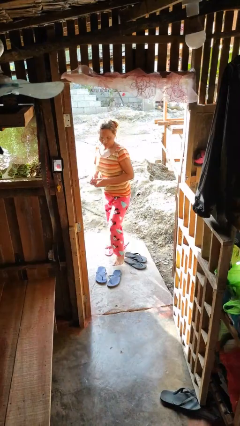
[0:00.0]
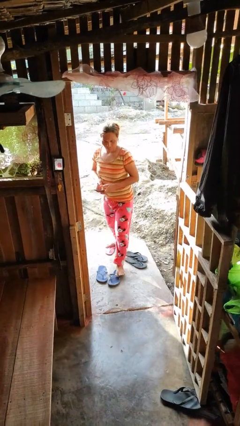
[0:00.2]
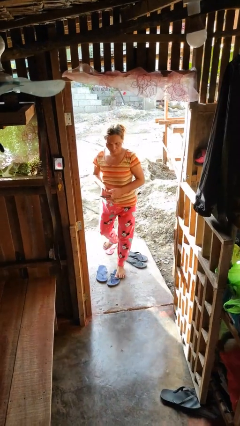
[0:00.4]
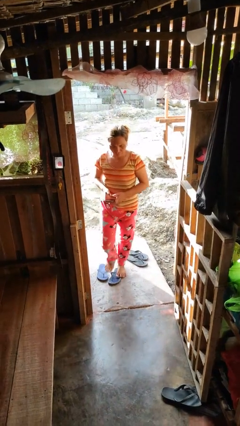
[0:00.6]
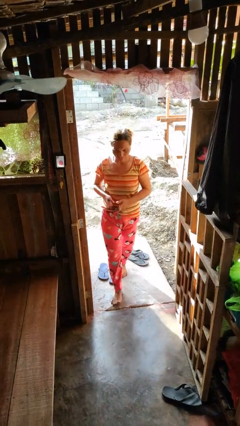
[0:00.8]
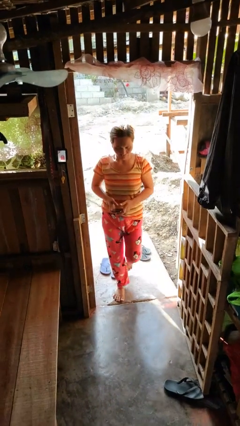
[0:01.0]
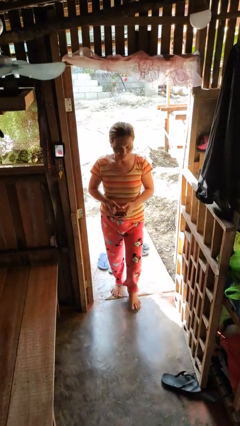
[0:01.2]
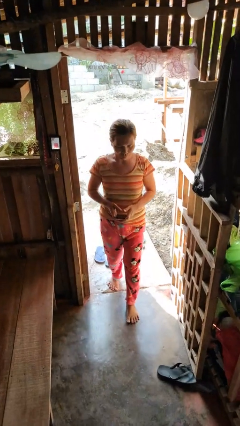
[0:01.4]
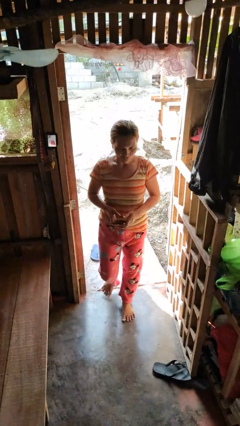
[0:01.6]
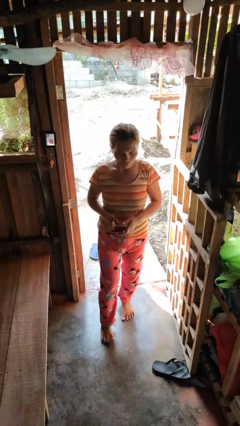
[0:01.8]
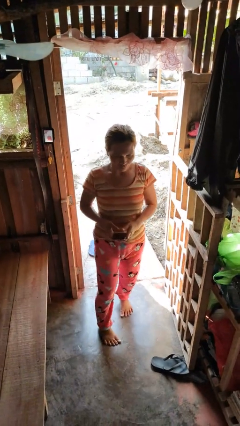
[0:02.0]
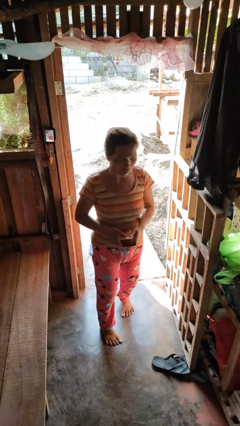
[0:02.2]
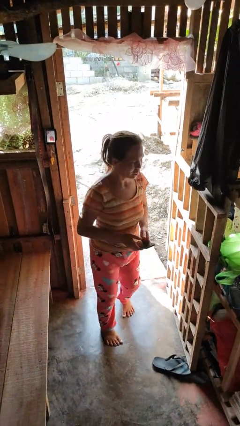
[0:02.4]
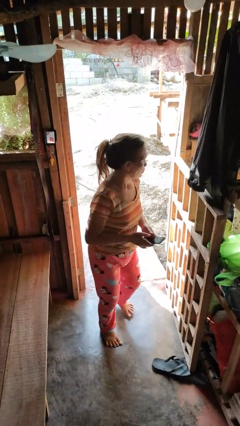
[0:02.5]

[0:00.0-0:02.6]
person enters scene through structure

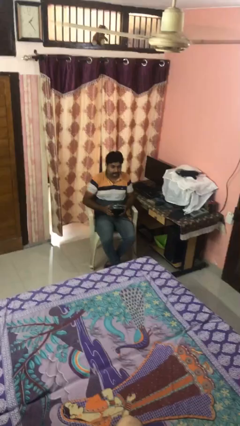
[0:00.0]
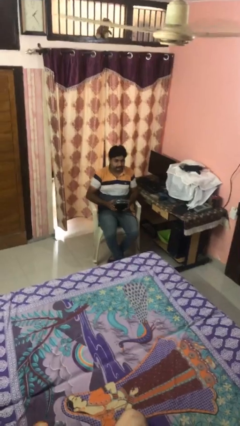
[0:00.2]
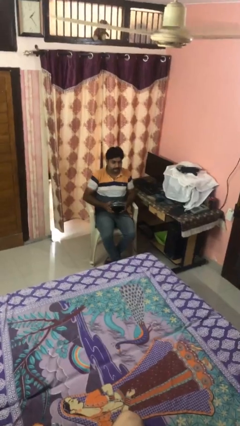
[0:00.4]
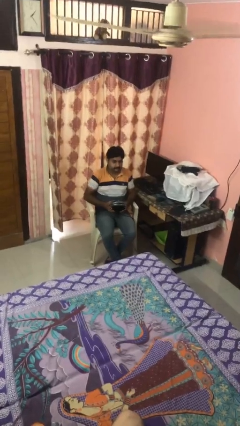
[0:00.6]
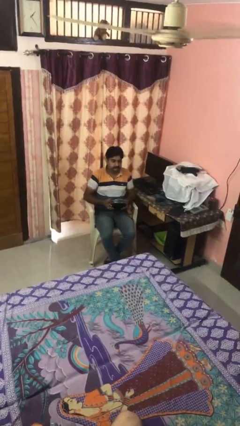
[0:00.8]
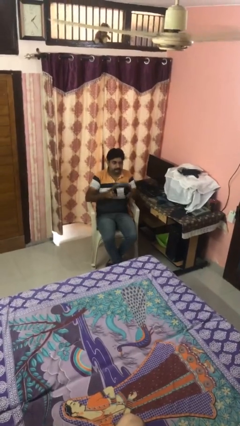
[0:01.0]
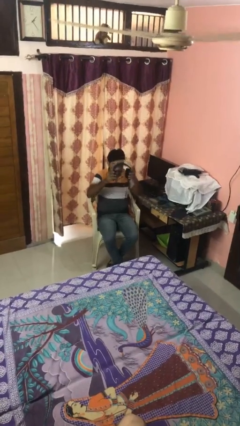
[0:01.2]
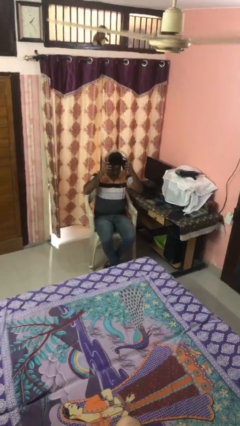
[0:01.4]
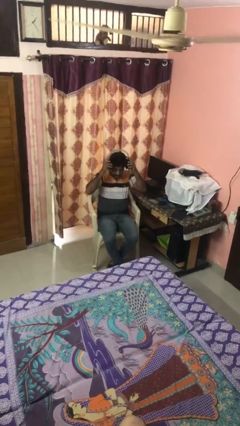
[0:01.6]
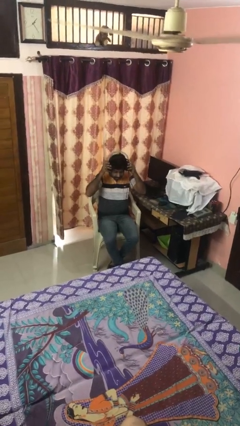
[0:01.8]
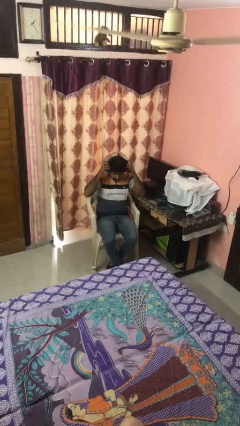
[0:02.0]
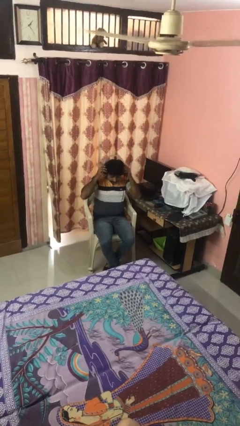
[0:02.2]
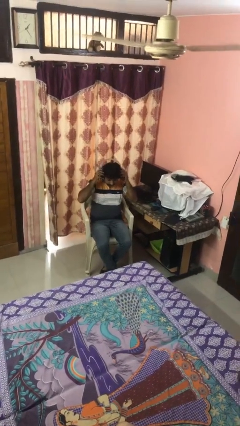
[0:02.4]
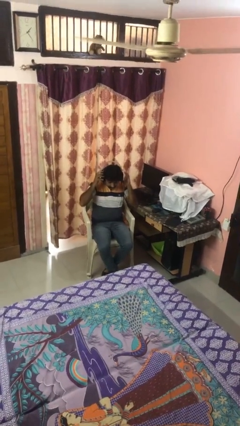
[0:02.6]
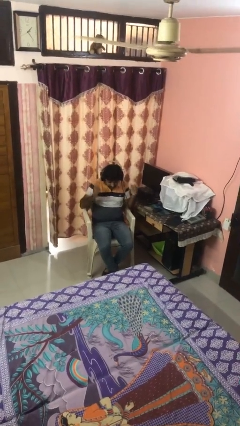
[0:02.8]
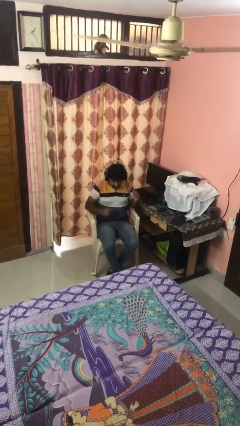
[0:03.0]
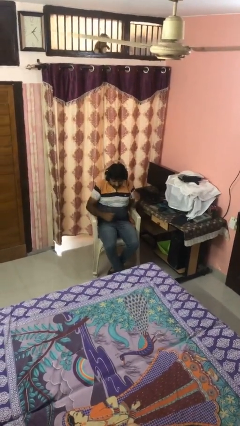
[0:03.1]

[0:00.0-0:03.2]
person puts on headphones

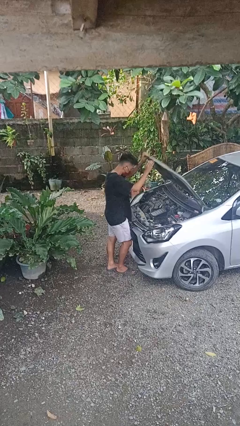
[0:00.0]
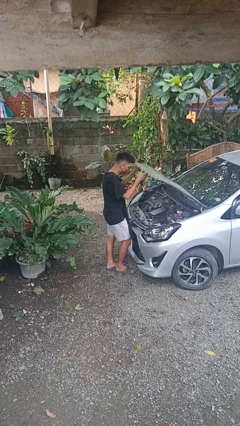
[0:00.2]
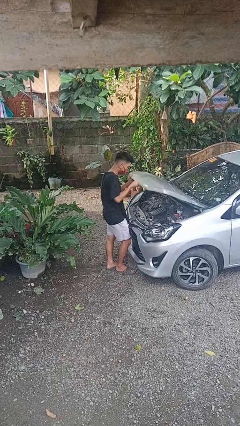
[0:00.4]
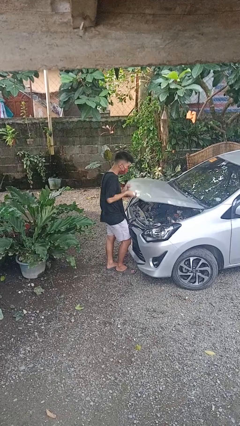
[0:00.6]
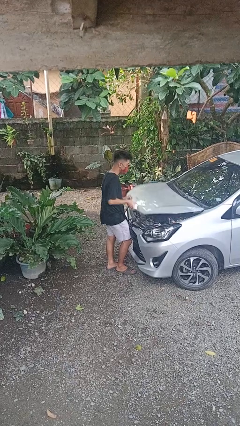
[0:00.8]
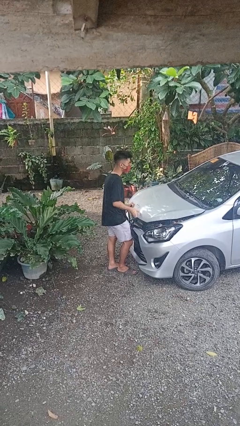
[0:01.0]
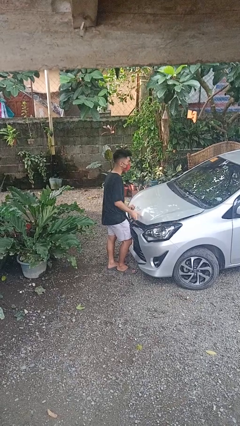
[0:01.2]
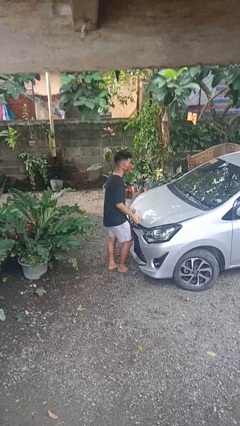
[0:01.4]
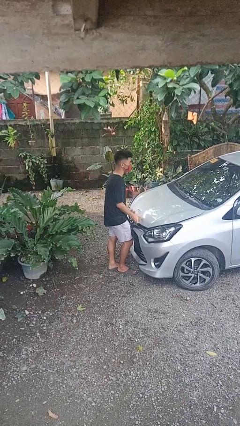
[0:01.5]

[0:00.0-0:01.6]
person closes car hood

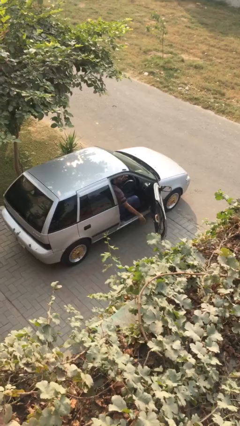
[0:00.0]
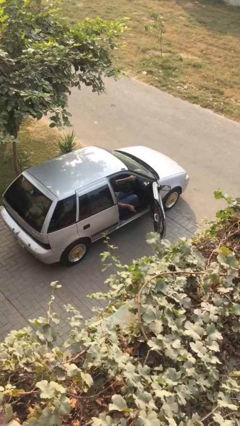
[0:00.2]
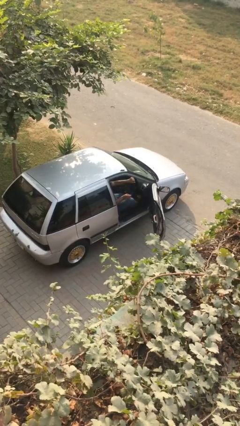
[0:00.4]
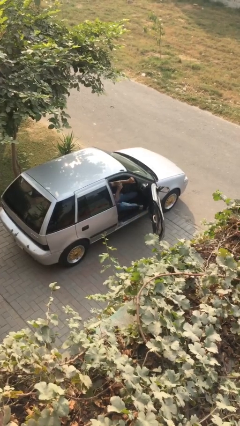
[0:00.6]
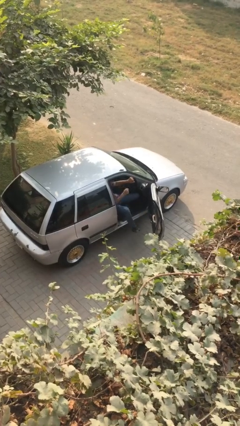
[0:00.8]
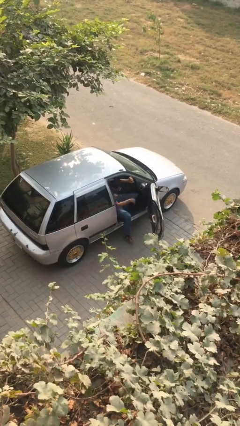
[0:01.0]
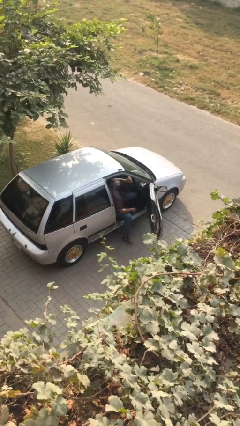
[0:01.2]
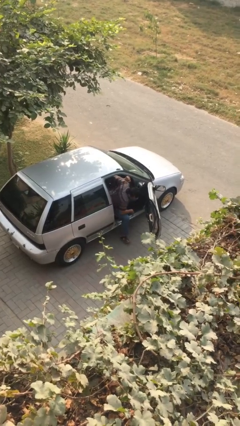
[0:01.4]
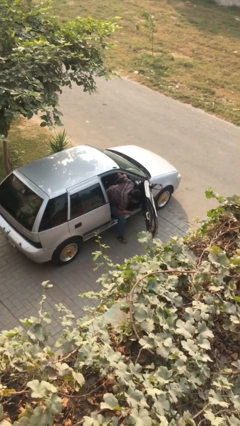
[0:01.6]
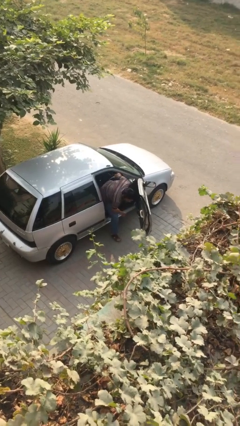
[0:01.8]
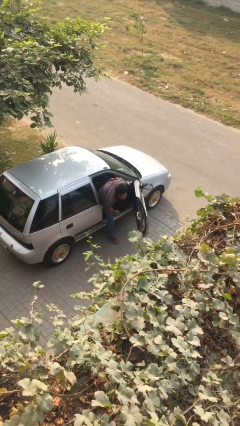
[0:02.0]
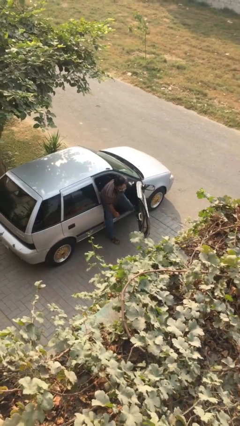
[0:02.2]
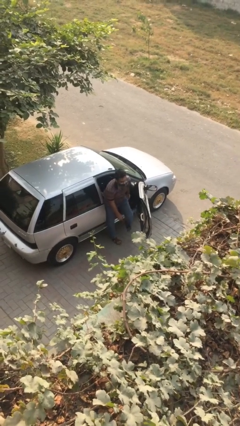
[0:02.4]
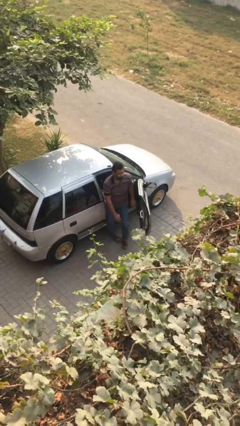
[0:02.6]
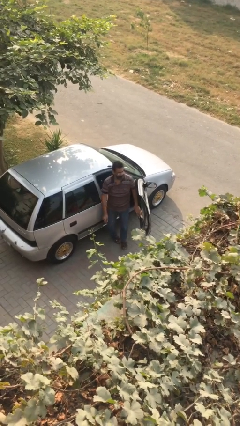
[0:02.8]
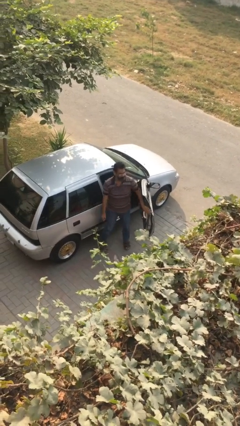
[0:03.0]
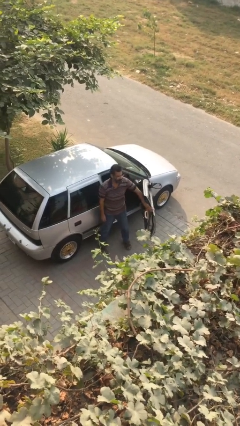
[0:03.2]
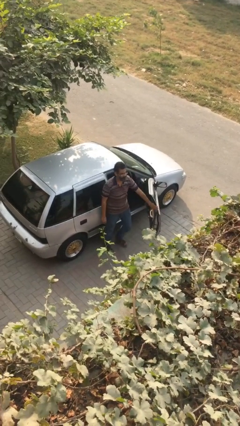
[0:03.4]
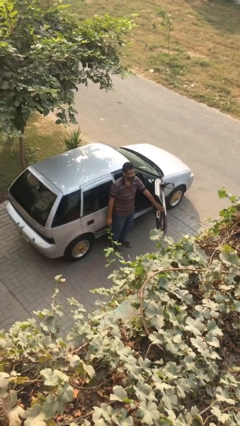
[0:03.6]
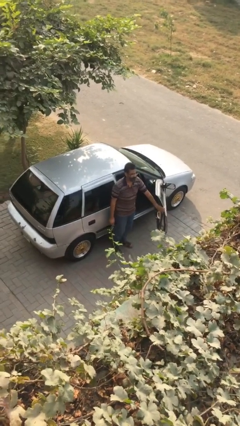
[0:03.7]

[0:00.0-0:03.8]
person exits car

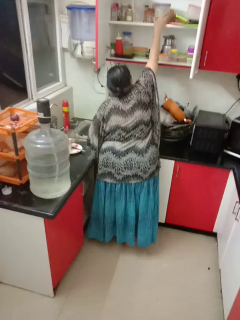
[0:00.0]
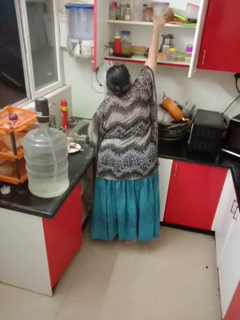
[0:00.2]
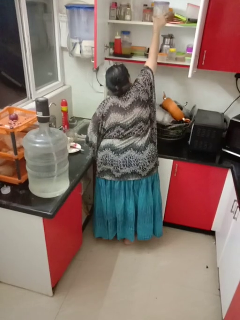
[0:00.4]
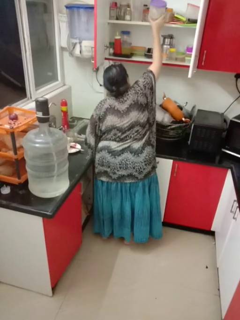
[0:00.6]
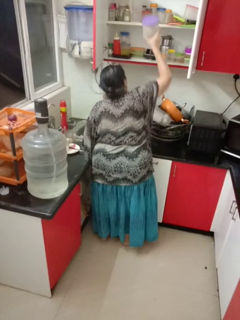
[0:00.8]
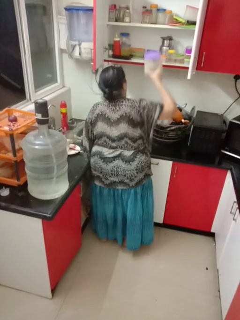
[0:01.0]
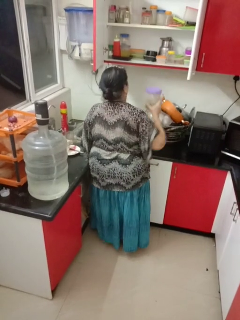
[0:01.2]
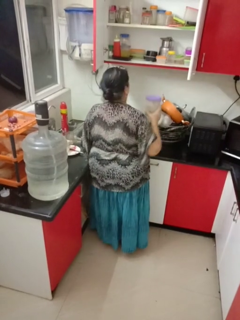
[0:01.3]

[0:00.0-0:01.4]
person takes object from cabinet

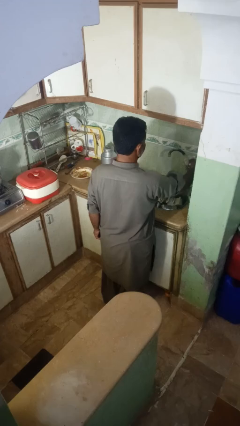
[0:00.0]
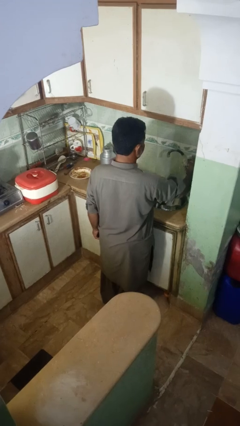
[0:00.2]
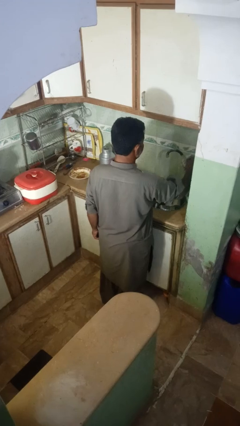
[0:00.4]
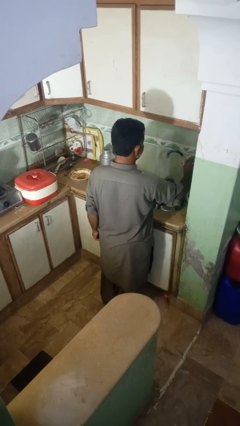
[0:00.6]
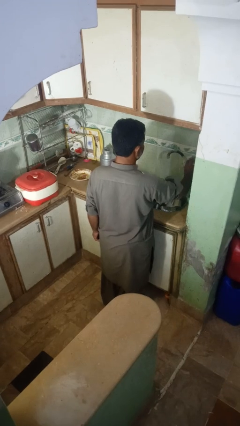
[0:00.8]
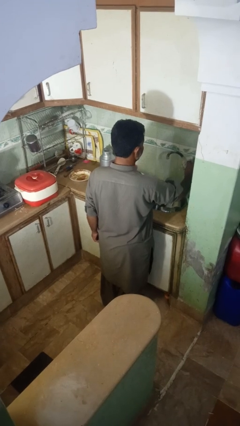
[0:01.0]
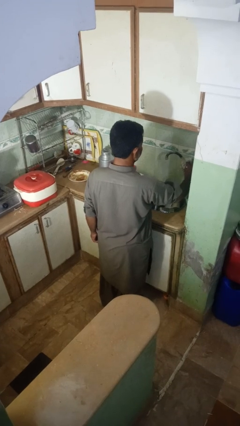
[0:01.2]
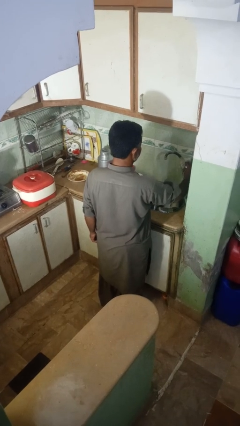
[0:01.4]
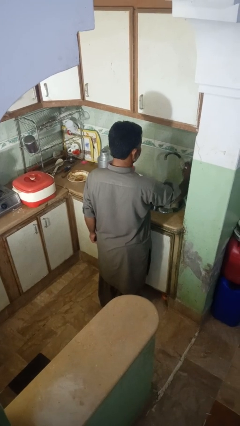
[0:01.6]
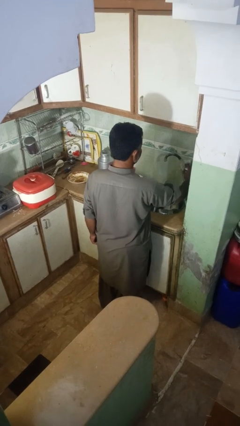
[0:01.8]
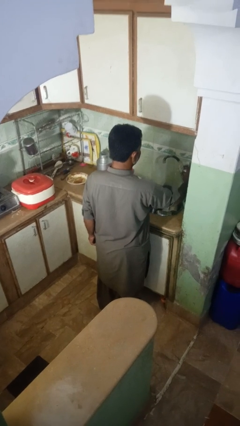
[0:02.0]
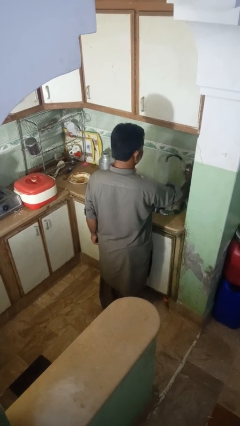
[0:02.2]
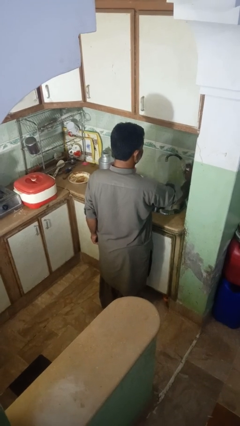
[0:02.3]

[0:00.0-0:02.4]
person turns on faucet

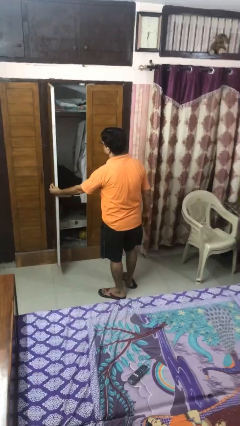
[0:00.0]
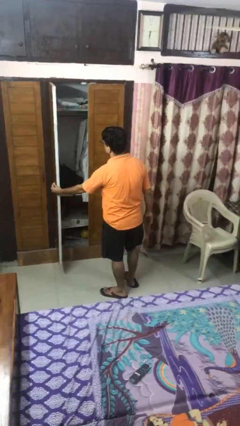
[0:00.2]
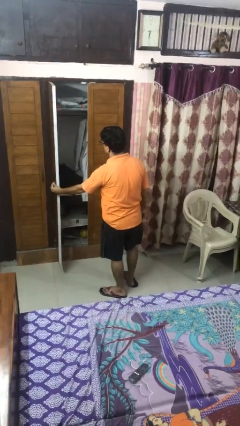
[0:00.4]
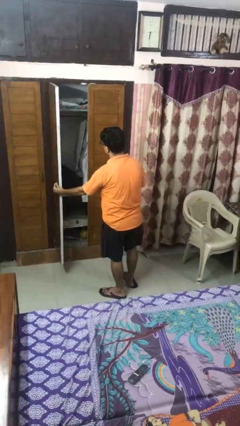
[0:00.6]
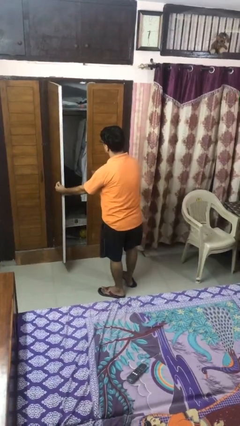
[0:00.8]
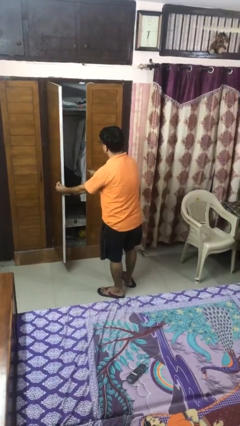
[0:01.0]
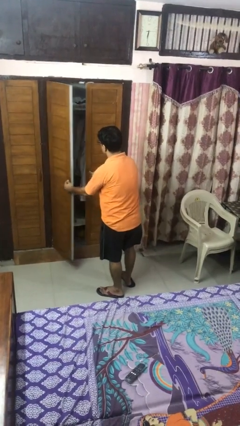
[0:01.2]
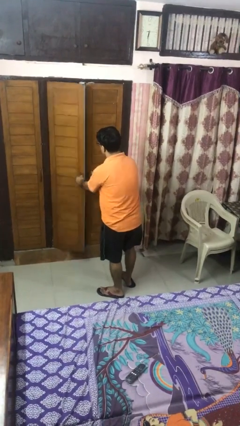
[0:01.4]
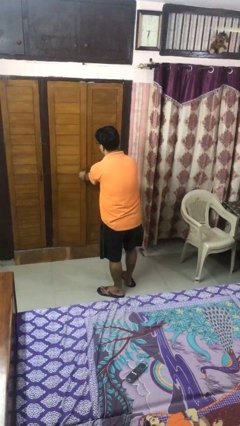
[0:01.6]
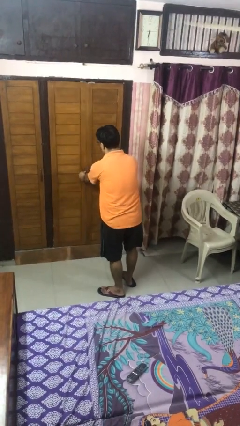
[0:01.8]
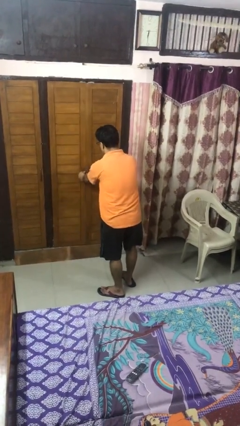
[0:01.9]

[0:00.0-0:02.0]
person closes closet door

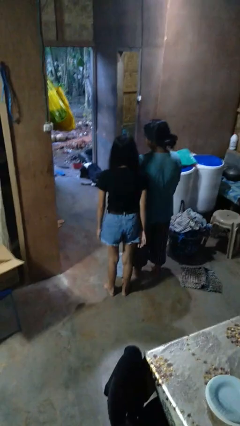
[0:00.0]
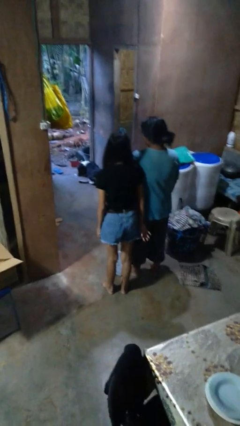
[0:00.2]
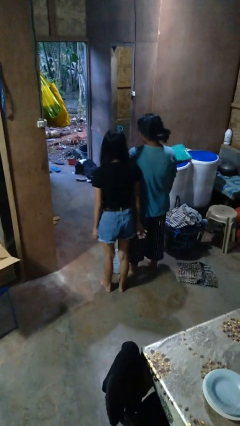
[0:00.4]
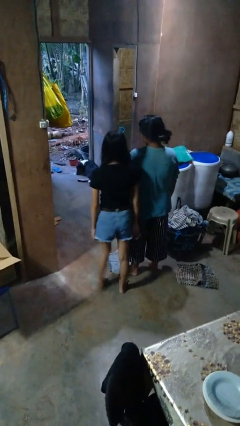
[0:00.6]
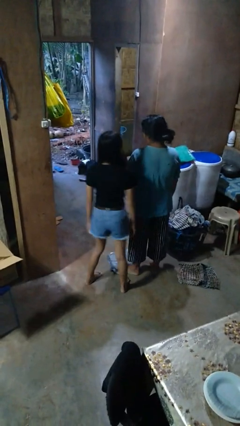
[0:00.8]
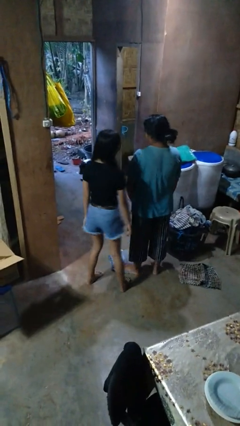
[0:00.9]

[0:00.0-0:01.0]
person bumps into person
